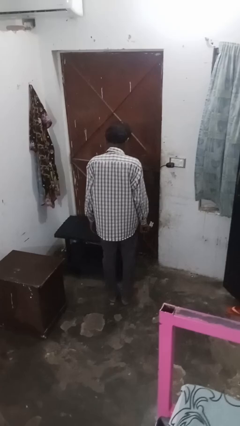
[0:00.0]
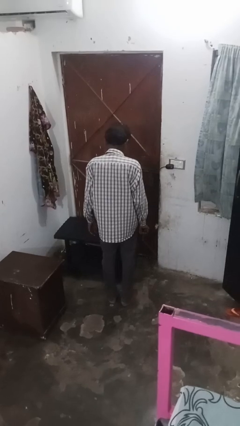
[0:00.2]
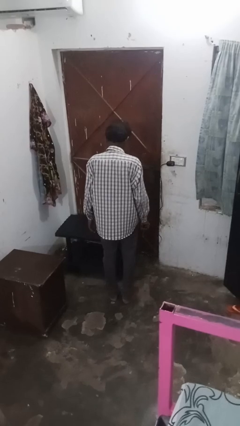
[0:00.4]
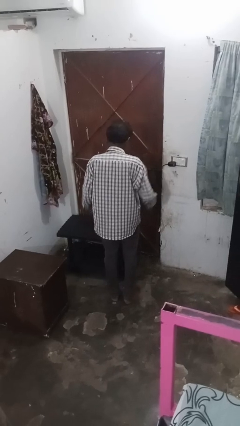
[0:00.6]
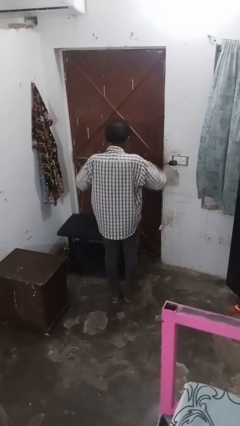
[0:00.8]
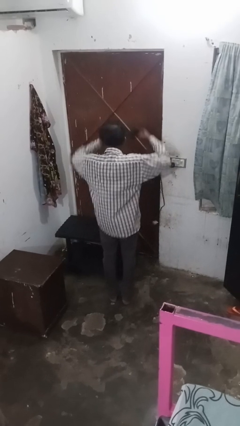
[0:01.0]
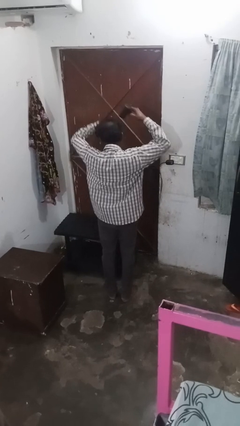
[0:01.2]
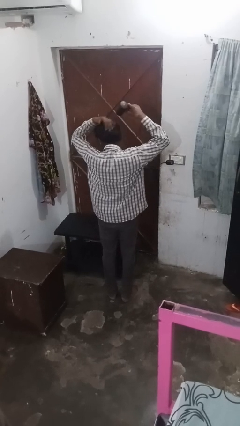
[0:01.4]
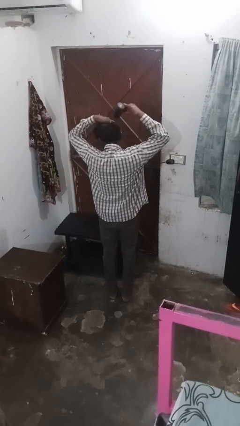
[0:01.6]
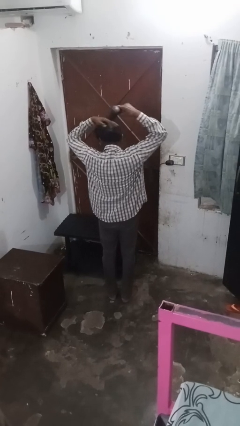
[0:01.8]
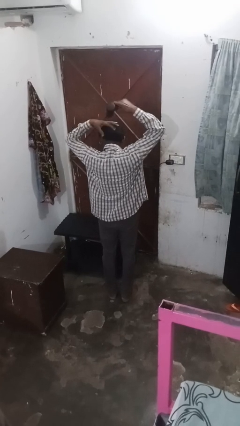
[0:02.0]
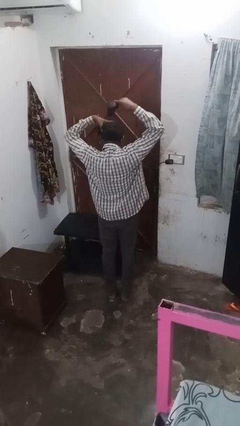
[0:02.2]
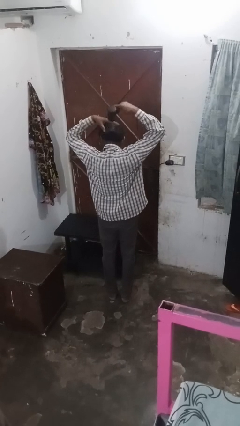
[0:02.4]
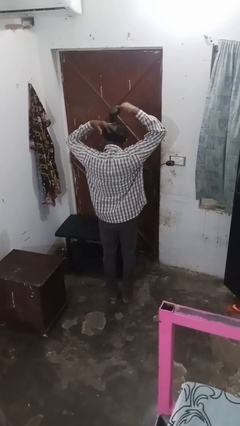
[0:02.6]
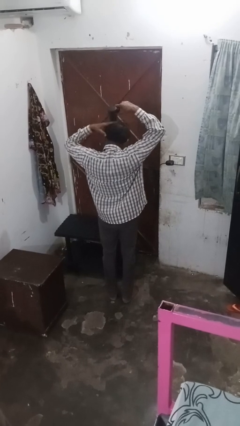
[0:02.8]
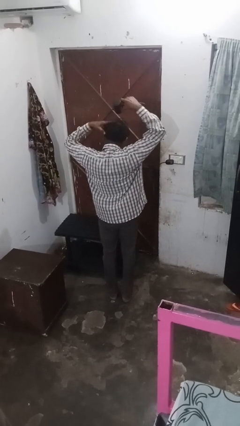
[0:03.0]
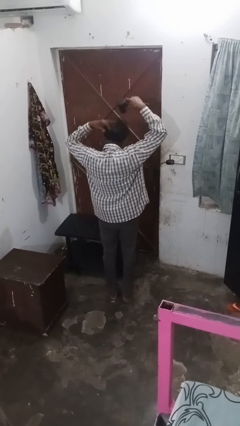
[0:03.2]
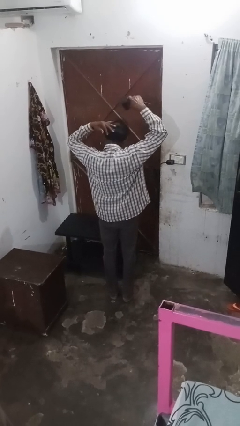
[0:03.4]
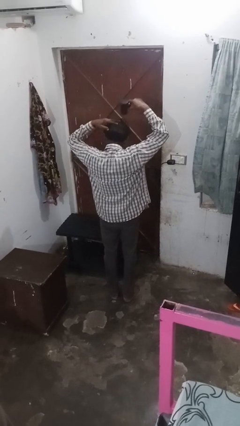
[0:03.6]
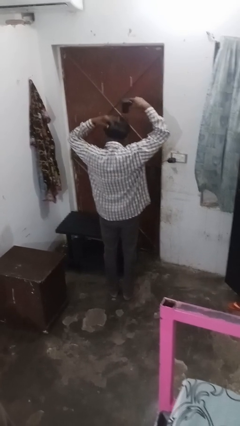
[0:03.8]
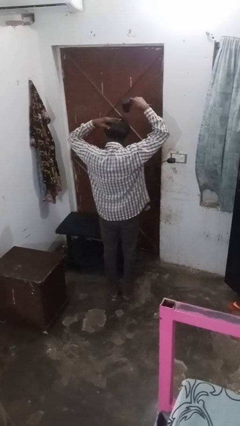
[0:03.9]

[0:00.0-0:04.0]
person dries hair with hairdryer

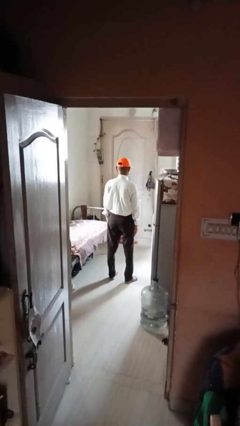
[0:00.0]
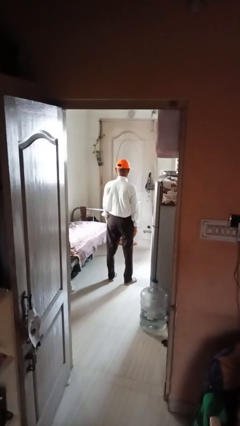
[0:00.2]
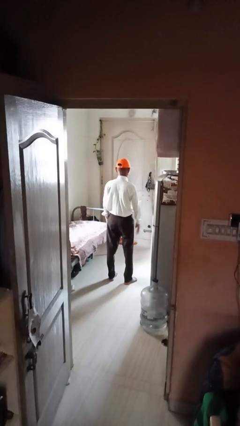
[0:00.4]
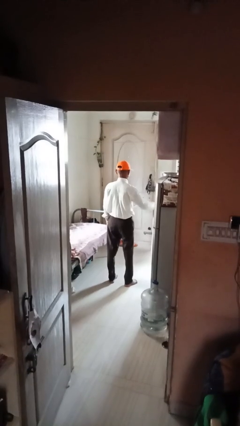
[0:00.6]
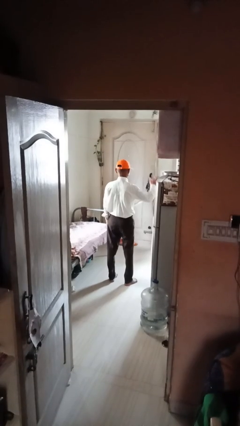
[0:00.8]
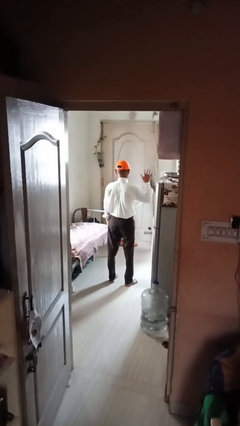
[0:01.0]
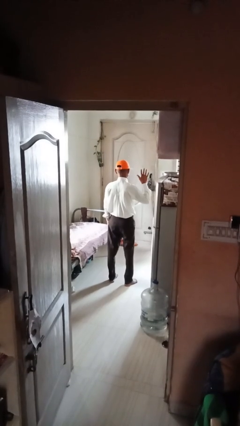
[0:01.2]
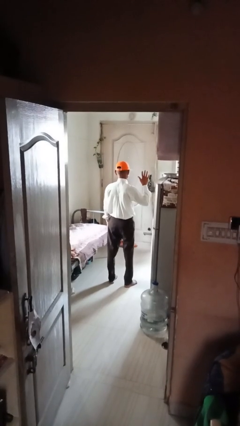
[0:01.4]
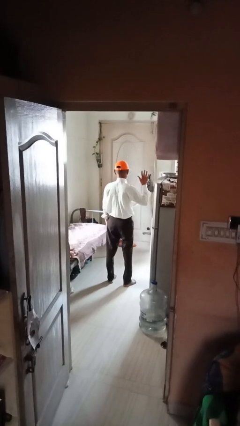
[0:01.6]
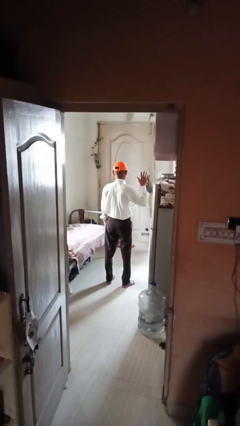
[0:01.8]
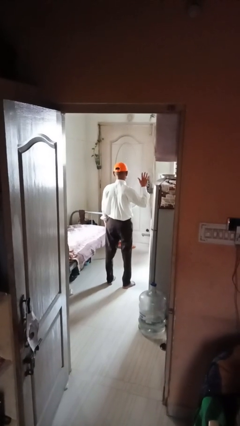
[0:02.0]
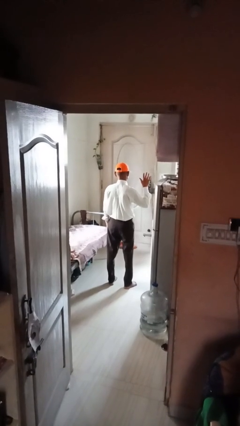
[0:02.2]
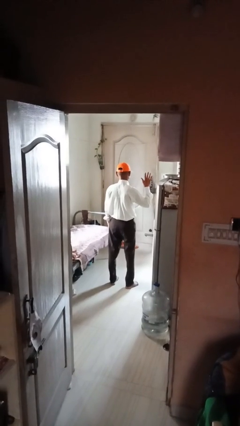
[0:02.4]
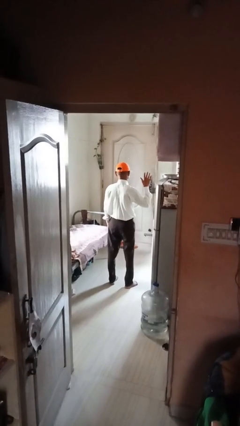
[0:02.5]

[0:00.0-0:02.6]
person gestures number five

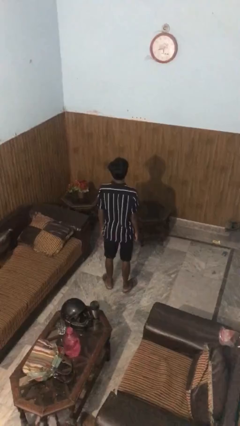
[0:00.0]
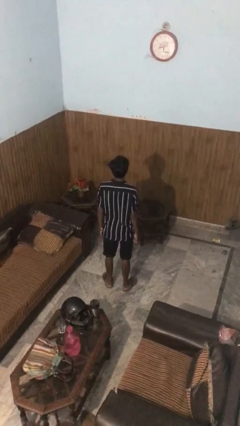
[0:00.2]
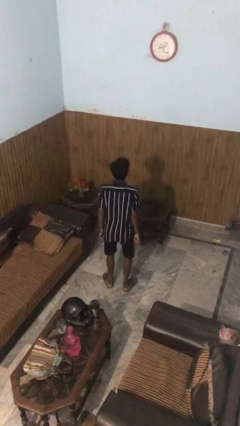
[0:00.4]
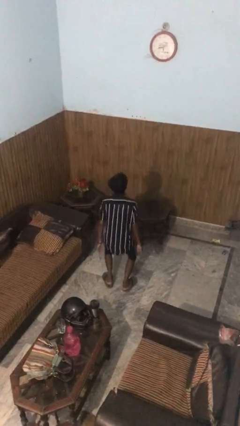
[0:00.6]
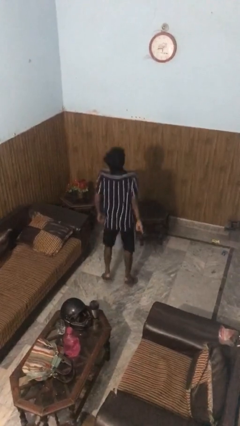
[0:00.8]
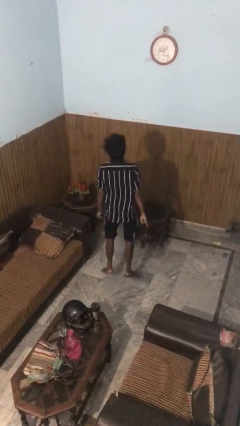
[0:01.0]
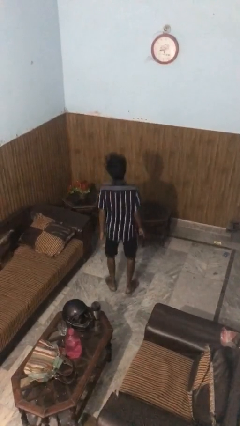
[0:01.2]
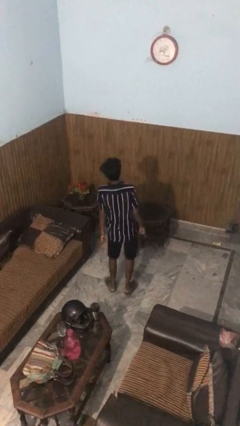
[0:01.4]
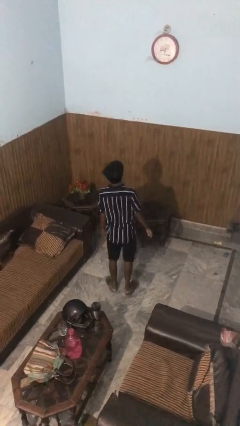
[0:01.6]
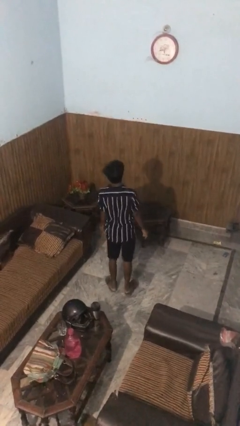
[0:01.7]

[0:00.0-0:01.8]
person jumps

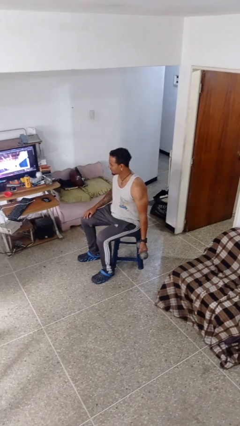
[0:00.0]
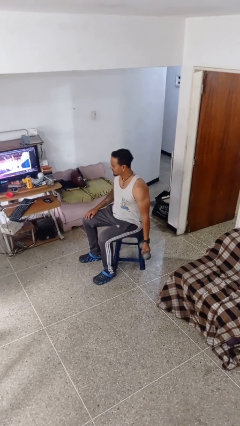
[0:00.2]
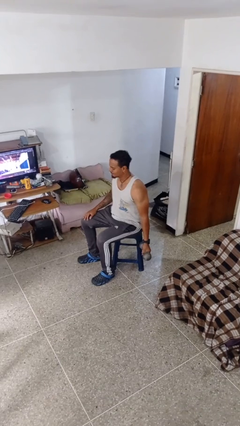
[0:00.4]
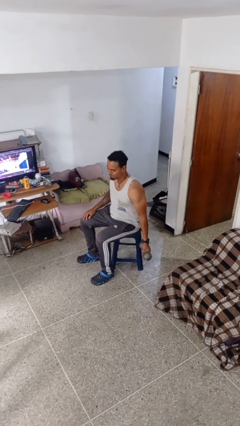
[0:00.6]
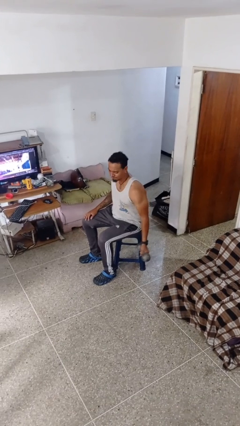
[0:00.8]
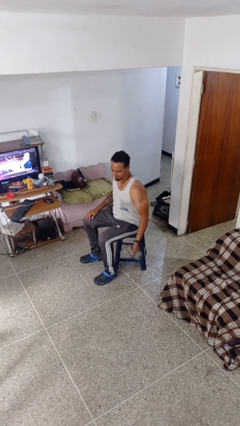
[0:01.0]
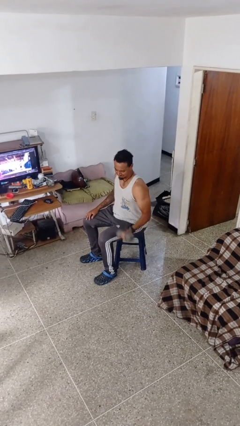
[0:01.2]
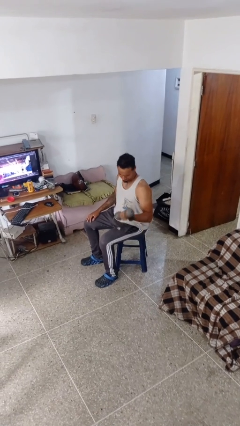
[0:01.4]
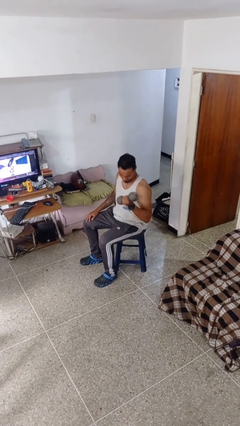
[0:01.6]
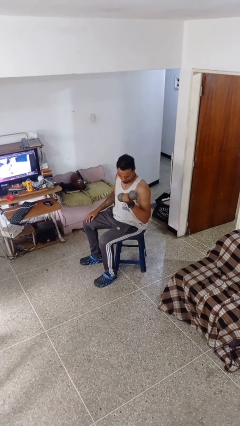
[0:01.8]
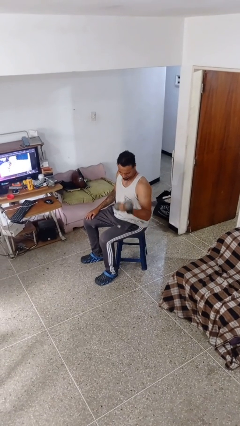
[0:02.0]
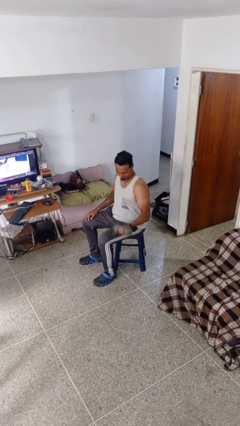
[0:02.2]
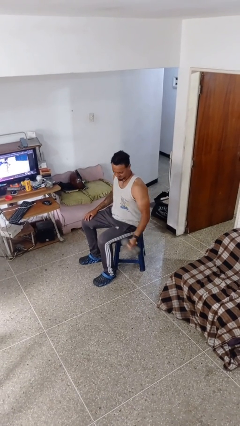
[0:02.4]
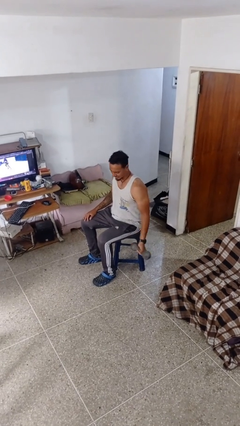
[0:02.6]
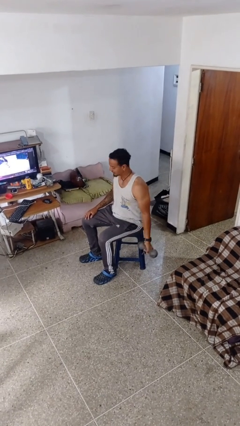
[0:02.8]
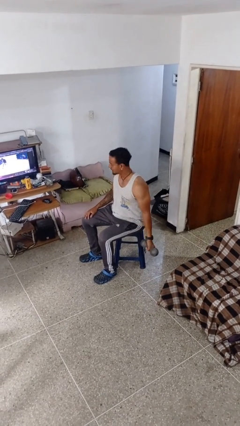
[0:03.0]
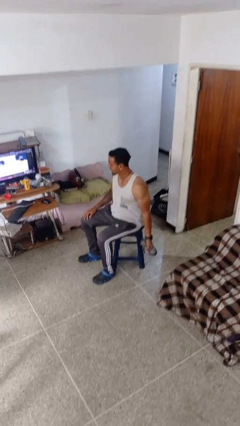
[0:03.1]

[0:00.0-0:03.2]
person lifts dumbbells

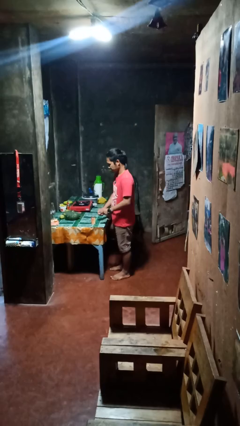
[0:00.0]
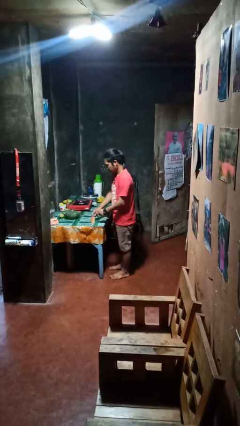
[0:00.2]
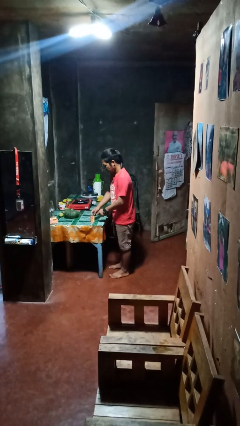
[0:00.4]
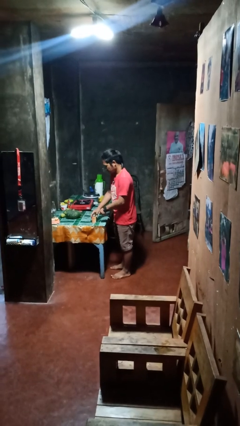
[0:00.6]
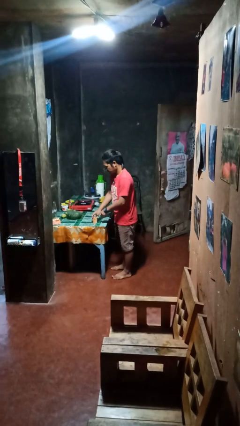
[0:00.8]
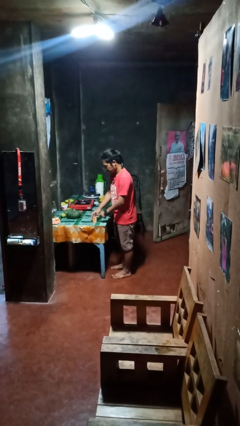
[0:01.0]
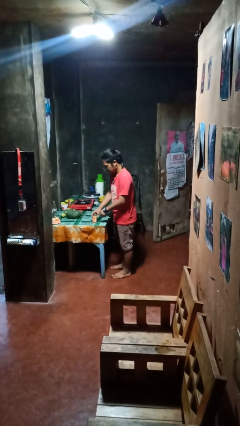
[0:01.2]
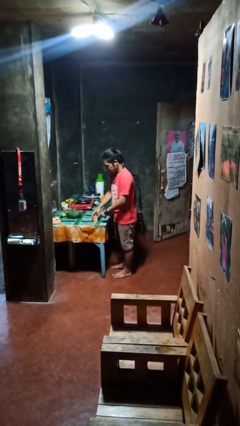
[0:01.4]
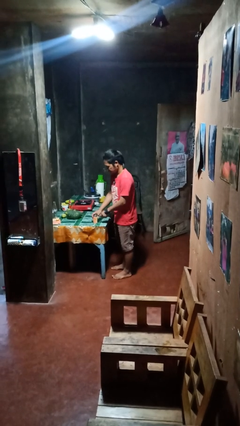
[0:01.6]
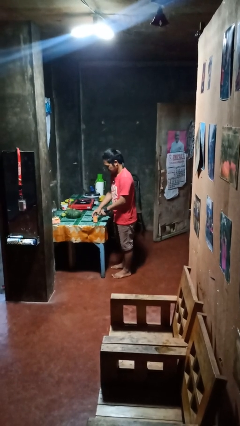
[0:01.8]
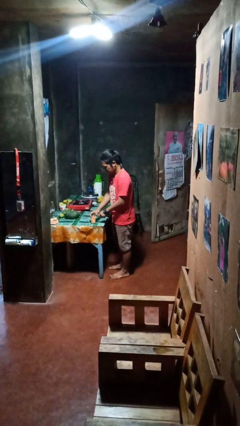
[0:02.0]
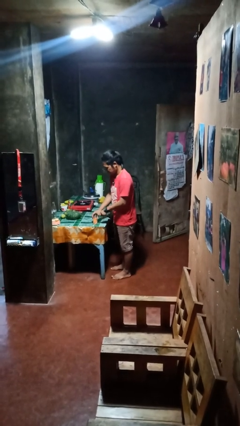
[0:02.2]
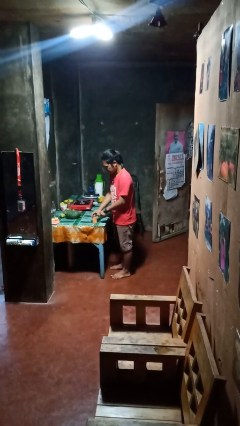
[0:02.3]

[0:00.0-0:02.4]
person opens can with can opener

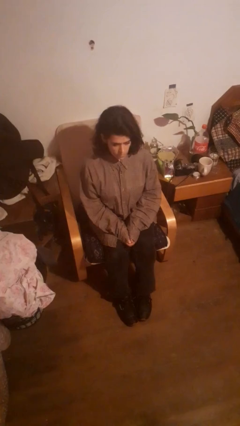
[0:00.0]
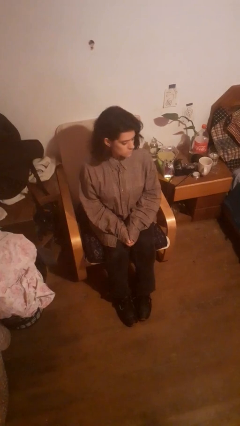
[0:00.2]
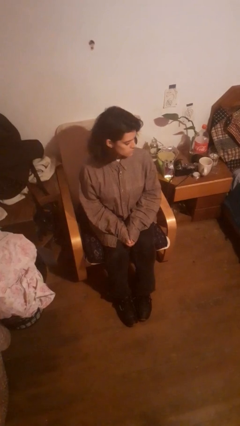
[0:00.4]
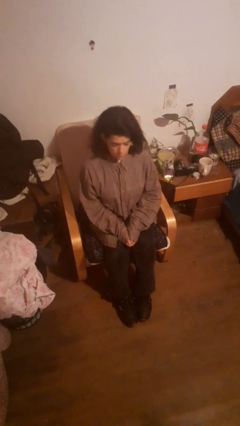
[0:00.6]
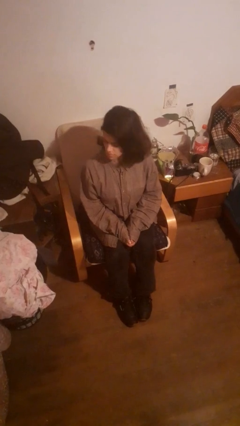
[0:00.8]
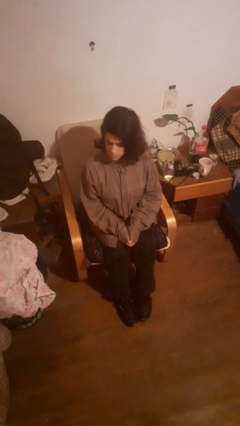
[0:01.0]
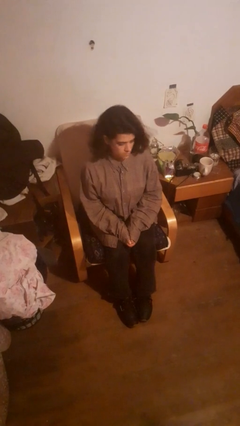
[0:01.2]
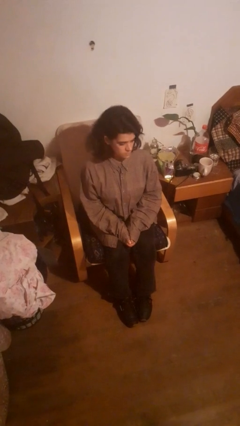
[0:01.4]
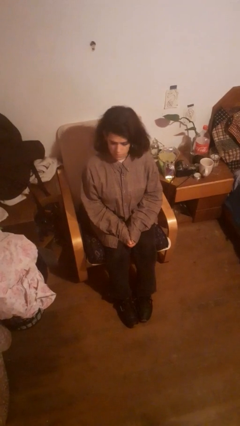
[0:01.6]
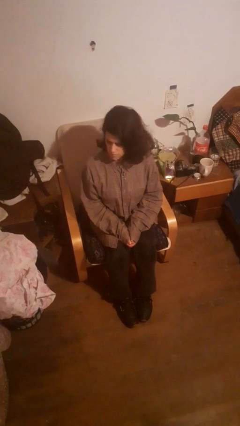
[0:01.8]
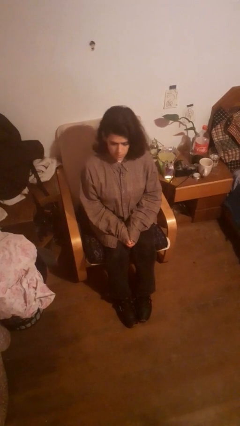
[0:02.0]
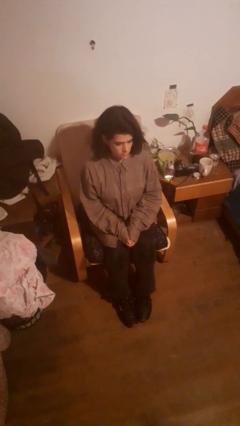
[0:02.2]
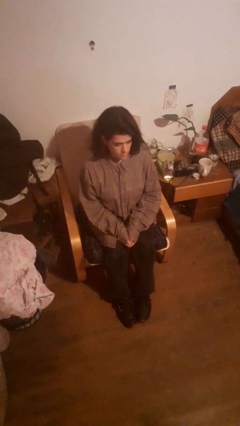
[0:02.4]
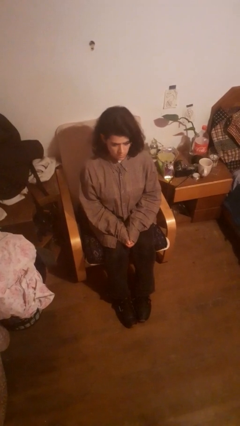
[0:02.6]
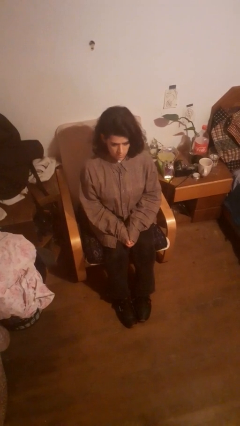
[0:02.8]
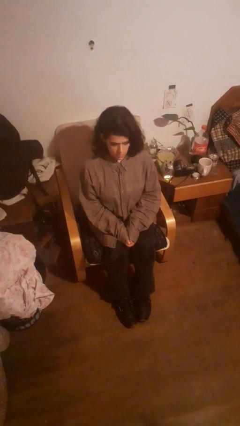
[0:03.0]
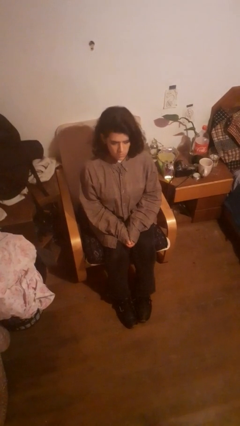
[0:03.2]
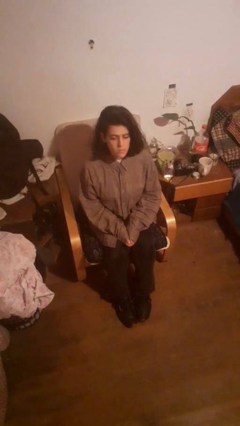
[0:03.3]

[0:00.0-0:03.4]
person shakes head
